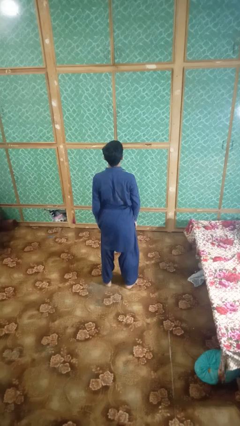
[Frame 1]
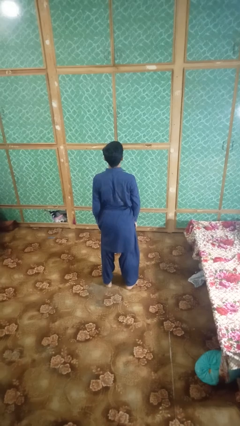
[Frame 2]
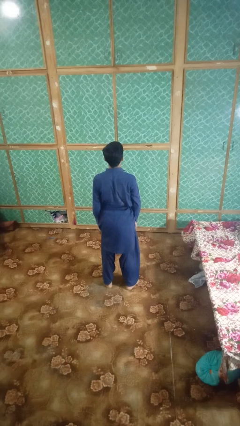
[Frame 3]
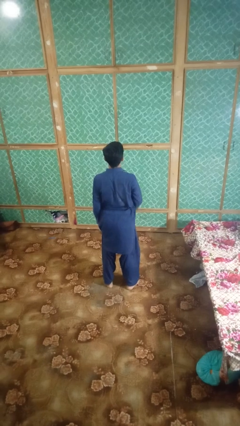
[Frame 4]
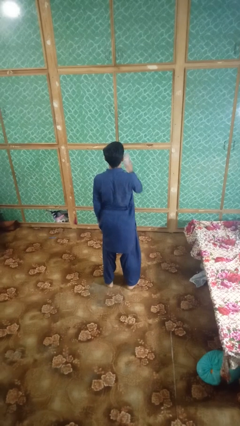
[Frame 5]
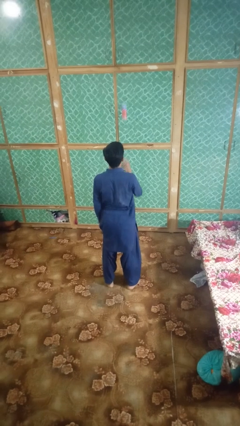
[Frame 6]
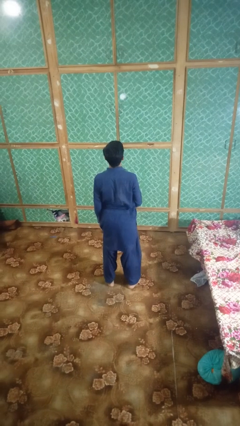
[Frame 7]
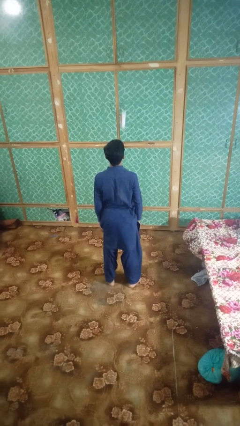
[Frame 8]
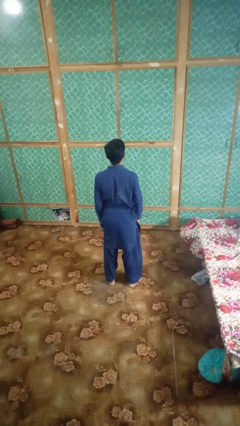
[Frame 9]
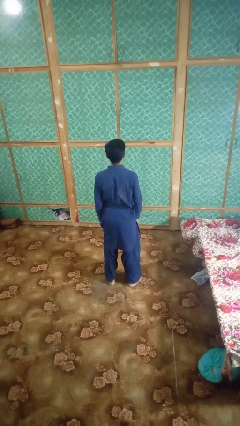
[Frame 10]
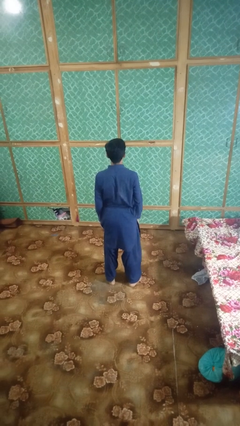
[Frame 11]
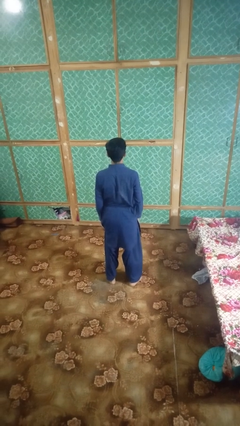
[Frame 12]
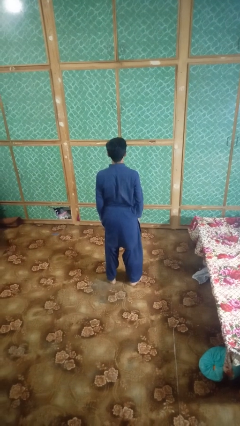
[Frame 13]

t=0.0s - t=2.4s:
person throws object into air

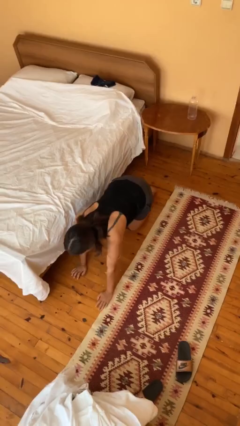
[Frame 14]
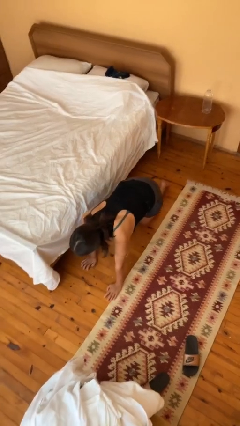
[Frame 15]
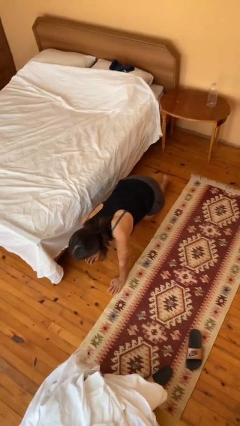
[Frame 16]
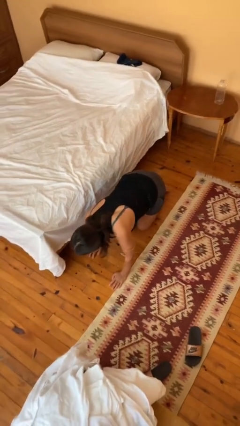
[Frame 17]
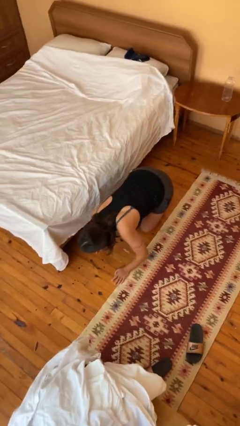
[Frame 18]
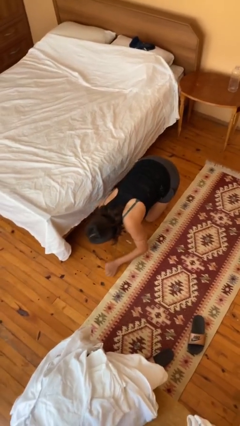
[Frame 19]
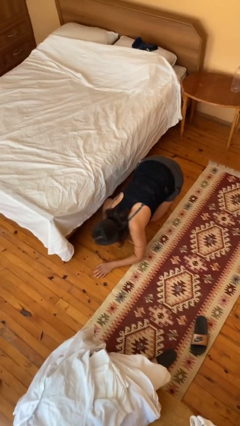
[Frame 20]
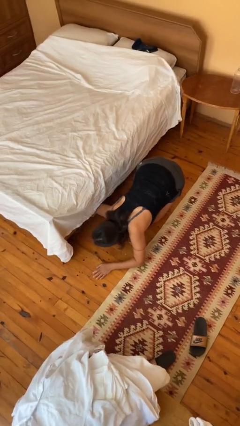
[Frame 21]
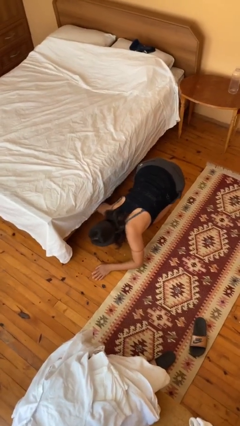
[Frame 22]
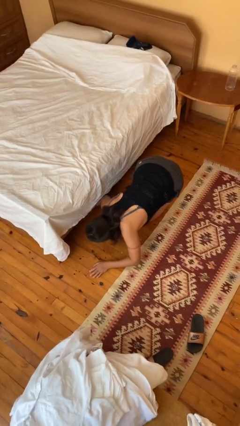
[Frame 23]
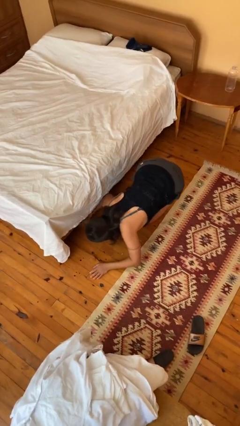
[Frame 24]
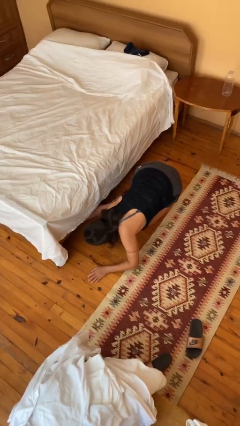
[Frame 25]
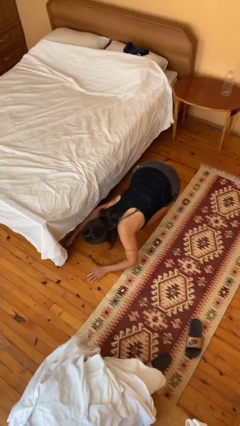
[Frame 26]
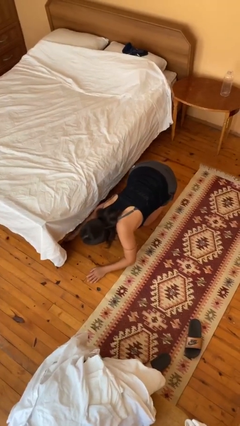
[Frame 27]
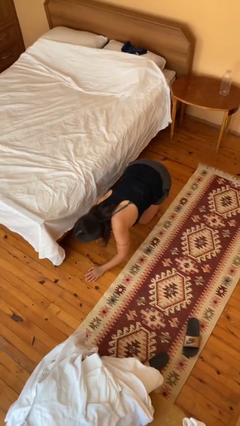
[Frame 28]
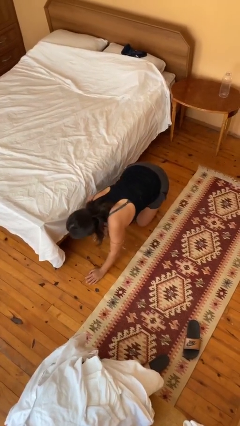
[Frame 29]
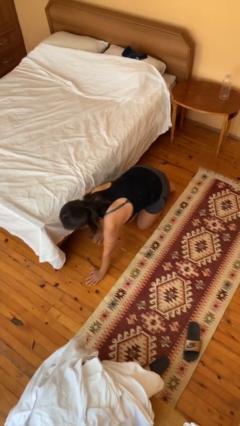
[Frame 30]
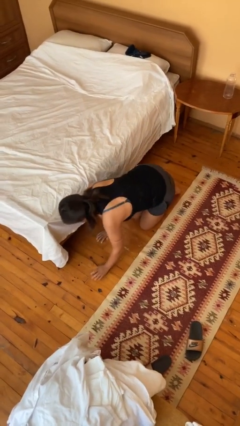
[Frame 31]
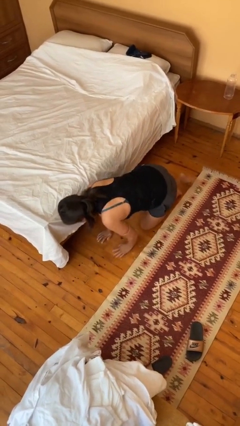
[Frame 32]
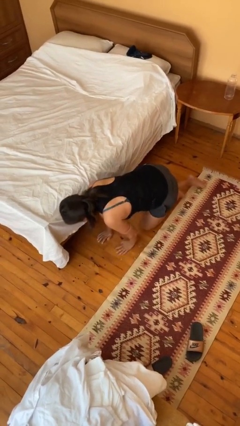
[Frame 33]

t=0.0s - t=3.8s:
person searches under bed

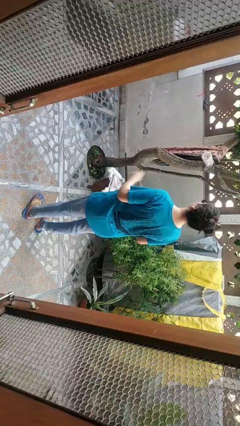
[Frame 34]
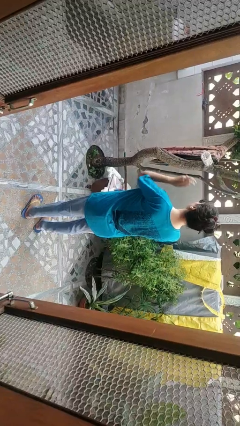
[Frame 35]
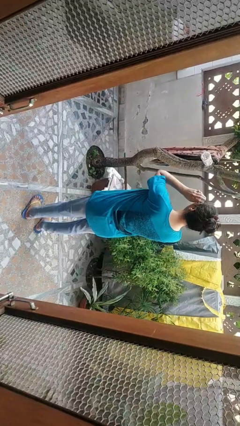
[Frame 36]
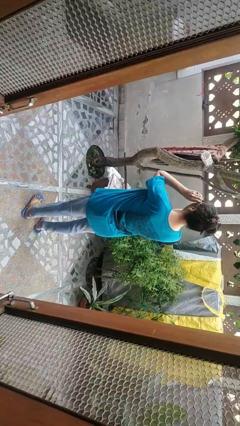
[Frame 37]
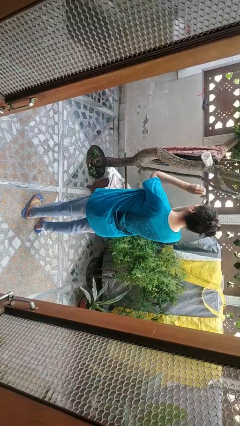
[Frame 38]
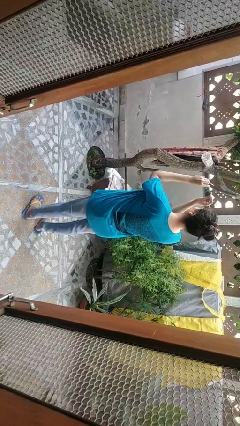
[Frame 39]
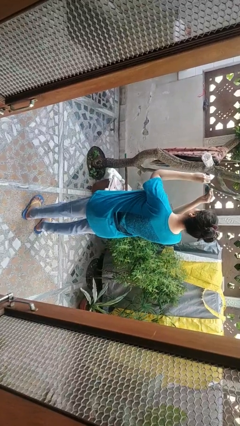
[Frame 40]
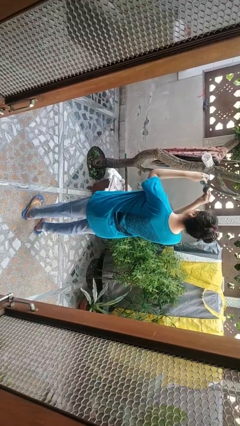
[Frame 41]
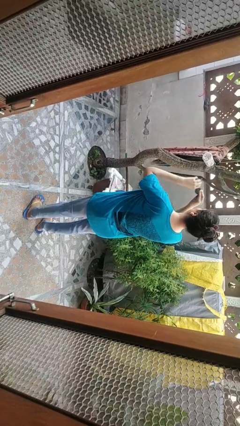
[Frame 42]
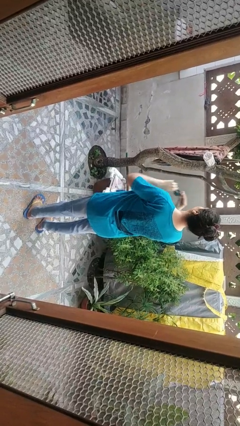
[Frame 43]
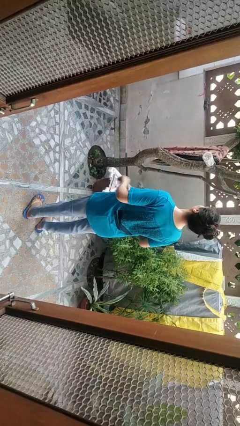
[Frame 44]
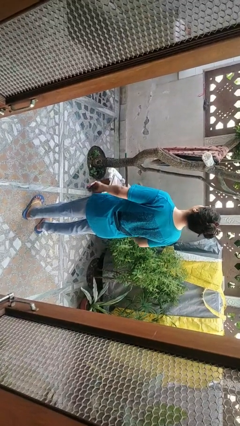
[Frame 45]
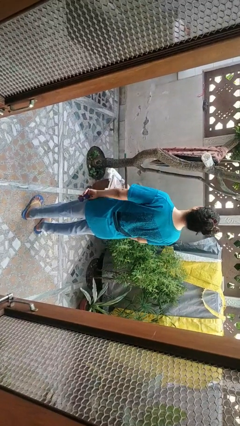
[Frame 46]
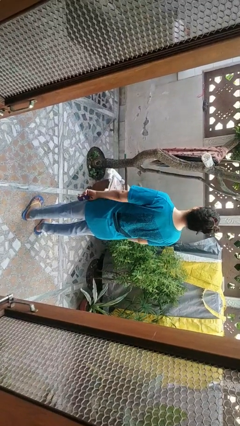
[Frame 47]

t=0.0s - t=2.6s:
person takes off sunglasses

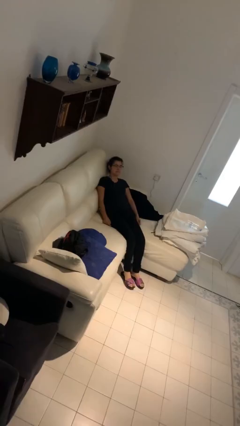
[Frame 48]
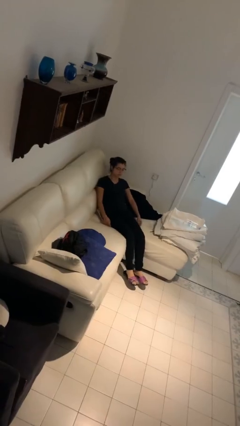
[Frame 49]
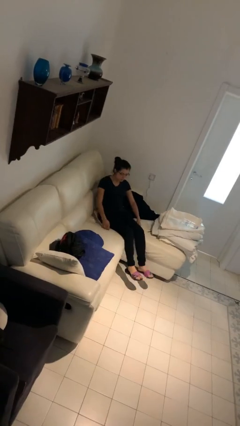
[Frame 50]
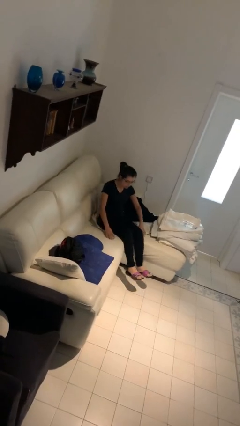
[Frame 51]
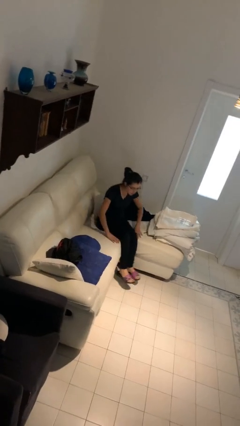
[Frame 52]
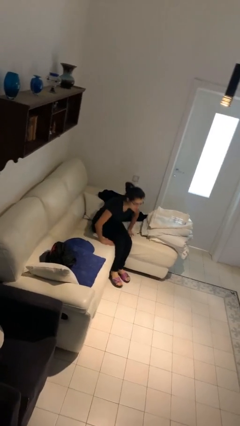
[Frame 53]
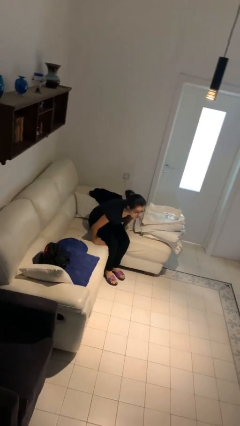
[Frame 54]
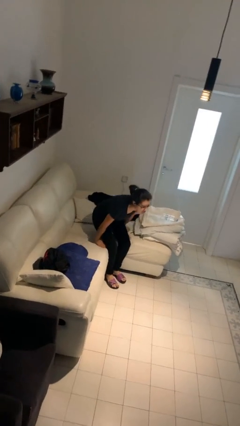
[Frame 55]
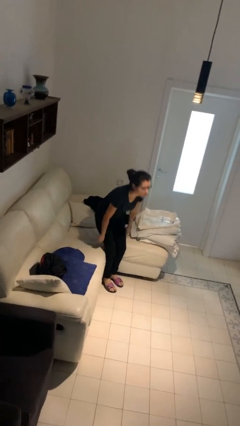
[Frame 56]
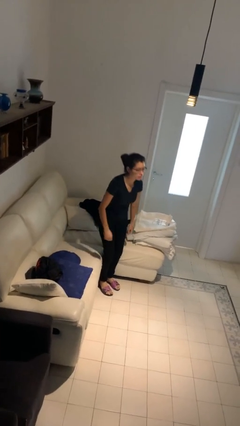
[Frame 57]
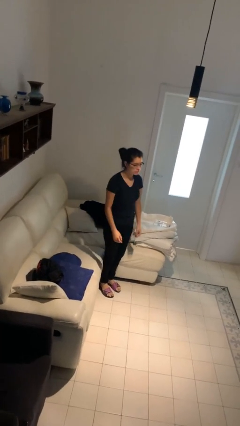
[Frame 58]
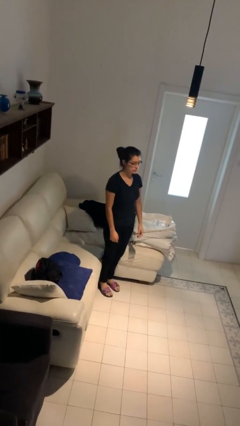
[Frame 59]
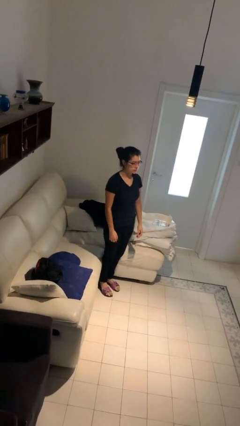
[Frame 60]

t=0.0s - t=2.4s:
person stands up

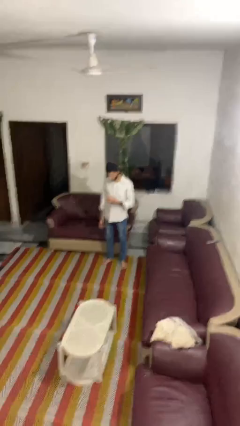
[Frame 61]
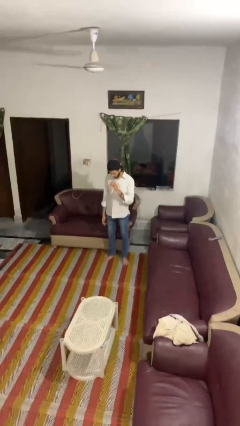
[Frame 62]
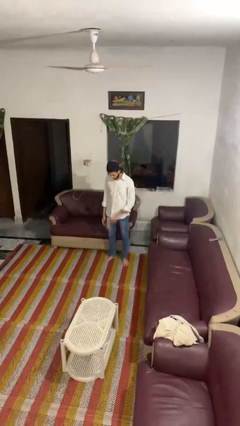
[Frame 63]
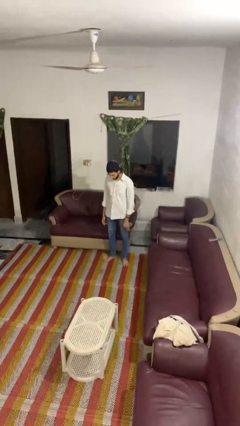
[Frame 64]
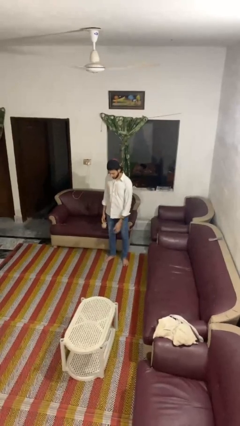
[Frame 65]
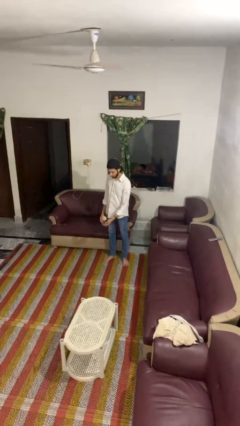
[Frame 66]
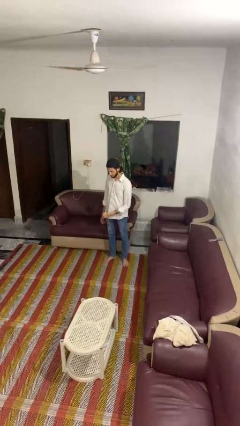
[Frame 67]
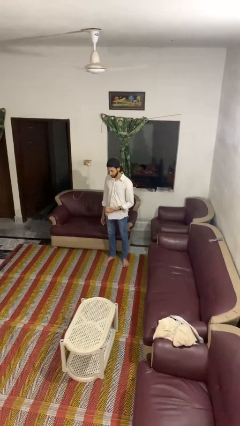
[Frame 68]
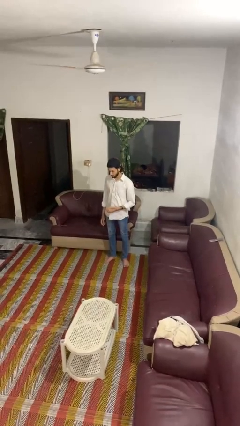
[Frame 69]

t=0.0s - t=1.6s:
person bounces ball on floor

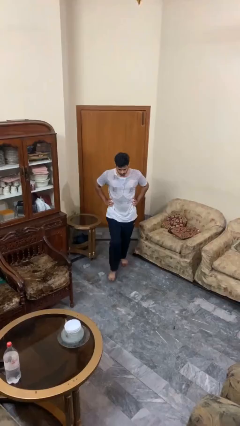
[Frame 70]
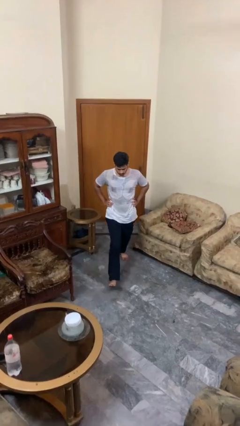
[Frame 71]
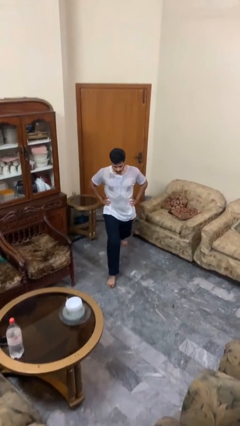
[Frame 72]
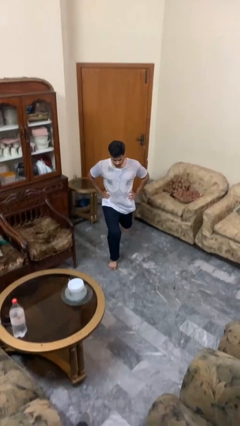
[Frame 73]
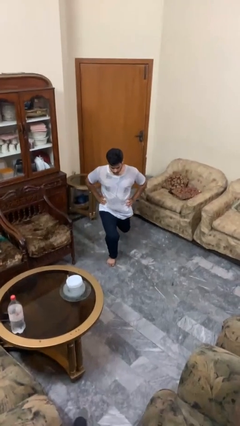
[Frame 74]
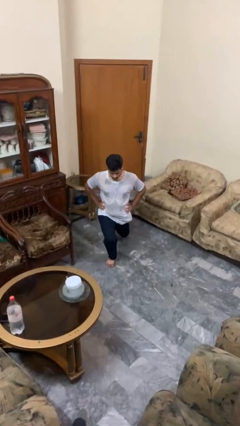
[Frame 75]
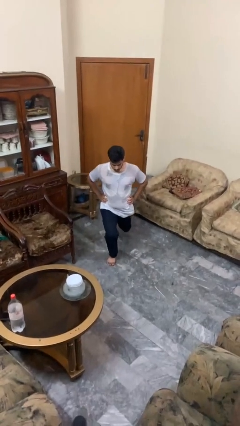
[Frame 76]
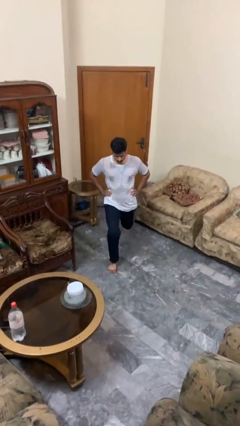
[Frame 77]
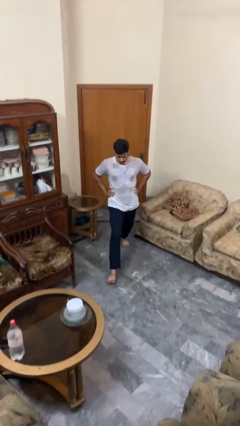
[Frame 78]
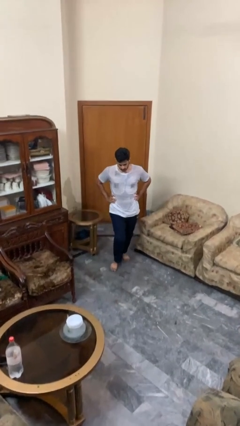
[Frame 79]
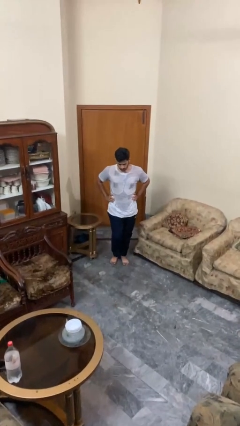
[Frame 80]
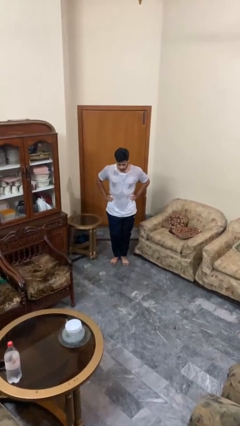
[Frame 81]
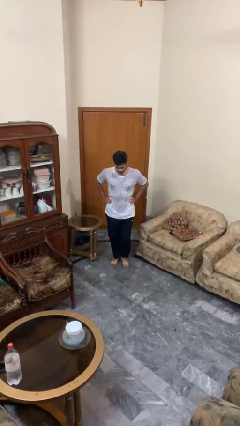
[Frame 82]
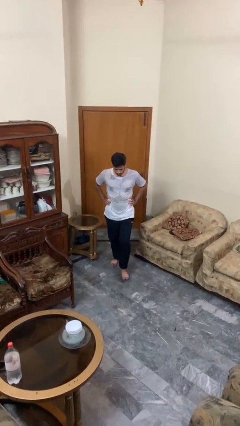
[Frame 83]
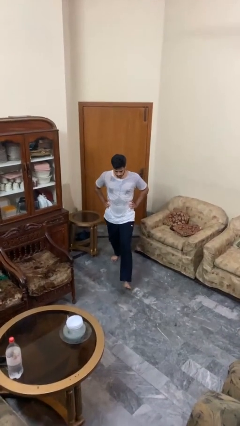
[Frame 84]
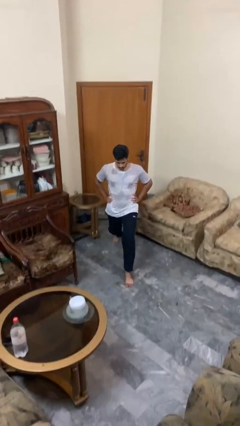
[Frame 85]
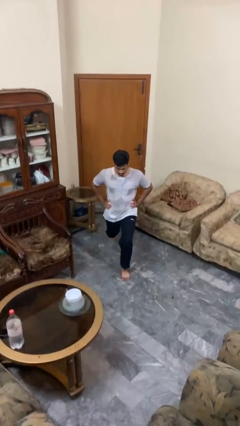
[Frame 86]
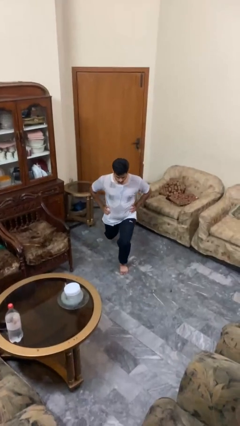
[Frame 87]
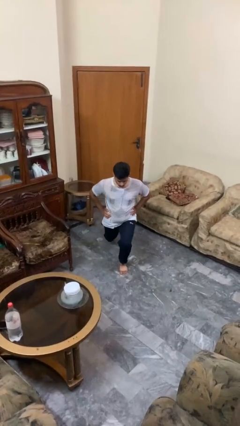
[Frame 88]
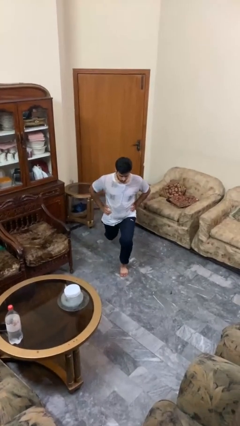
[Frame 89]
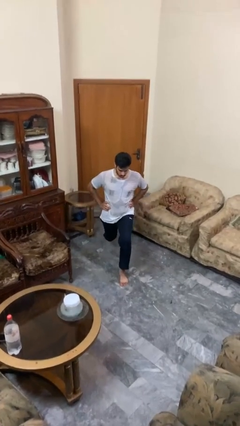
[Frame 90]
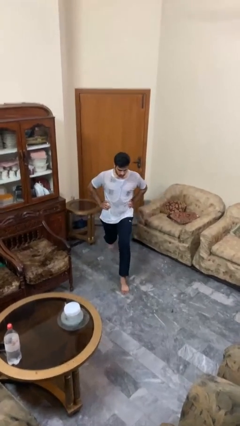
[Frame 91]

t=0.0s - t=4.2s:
person exercises with lunges

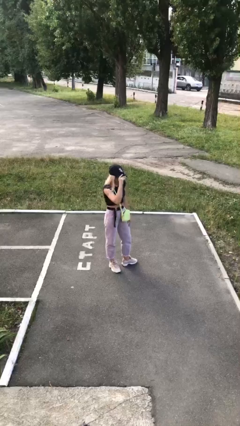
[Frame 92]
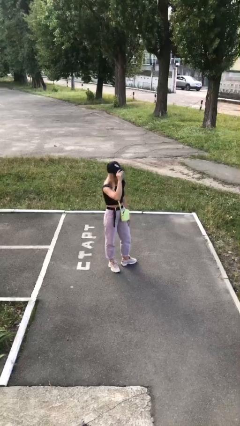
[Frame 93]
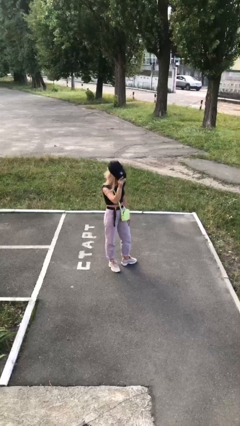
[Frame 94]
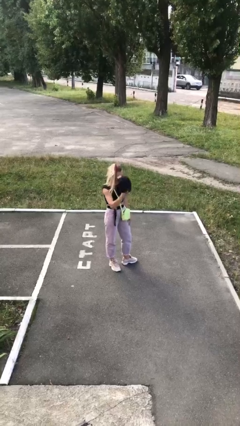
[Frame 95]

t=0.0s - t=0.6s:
person takes off hat
